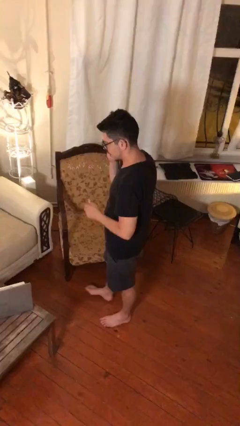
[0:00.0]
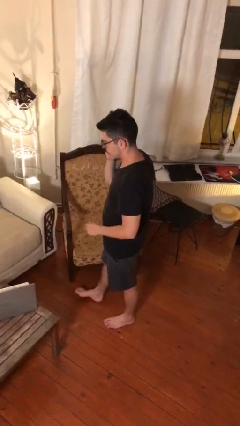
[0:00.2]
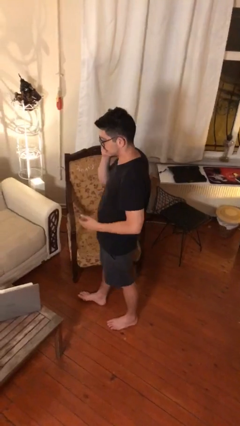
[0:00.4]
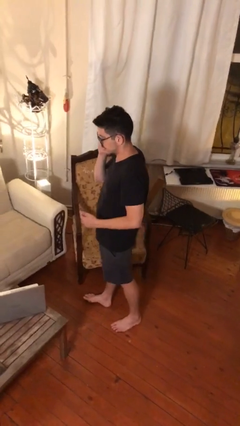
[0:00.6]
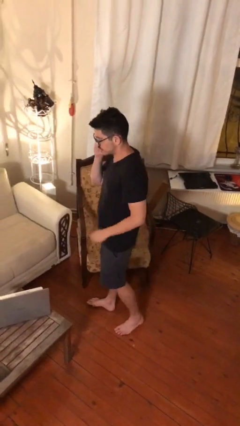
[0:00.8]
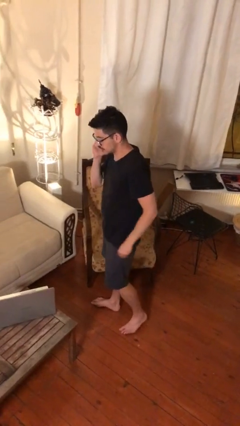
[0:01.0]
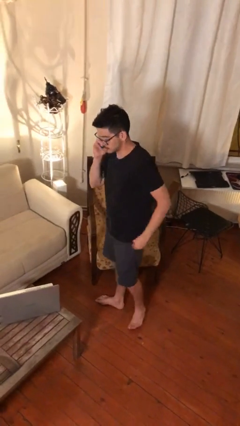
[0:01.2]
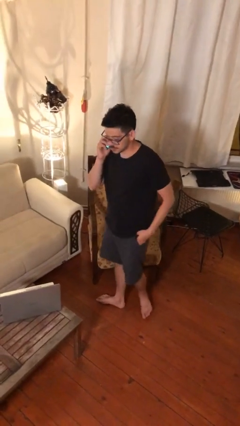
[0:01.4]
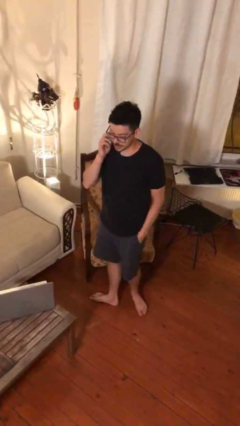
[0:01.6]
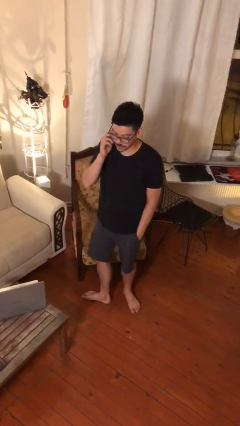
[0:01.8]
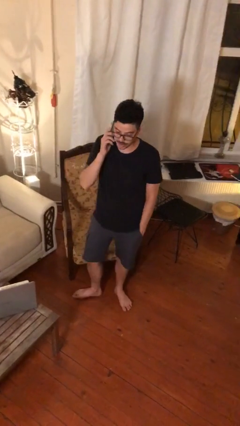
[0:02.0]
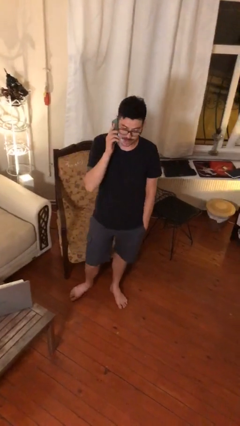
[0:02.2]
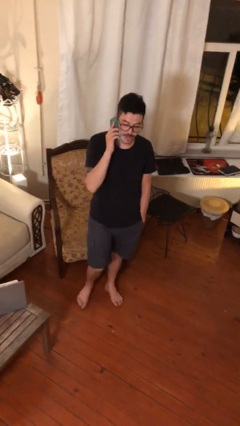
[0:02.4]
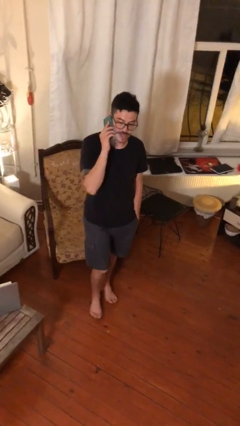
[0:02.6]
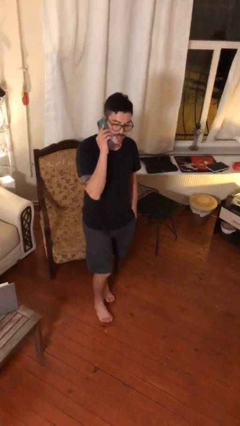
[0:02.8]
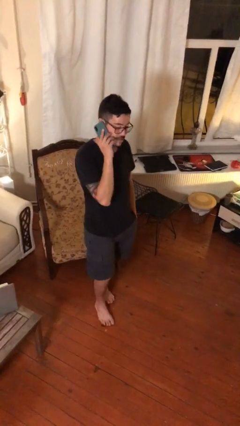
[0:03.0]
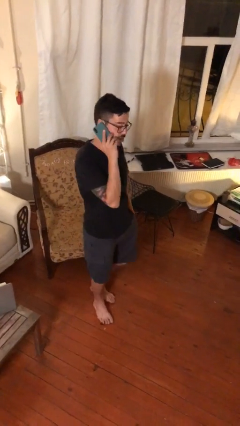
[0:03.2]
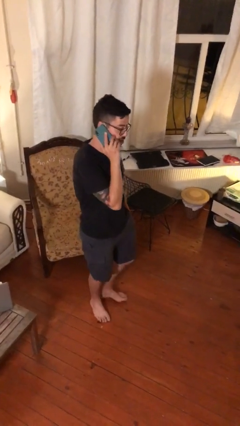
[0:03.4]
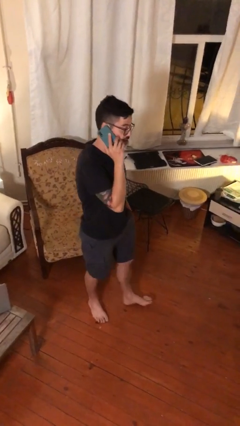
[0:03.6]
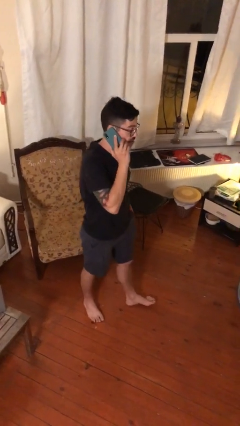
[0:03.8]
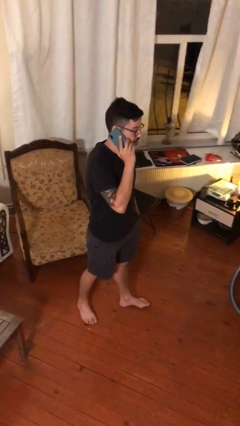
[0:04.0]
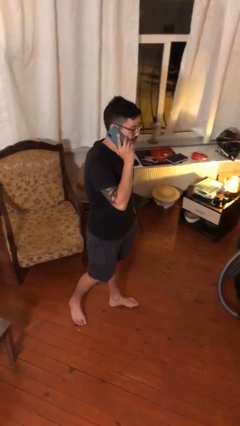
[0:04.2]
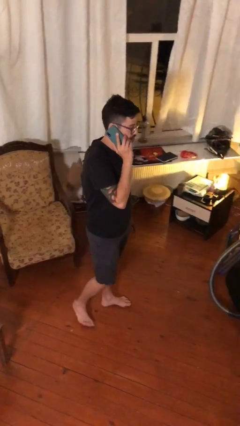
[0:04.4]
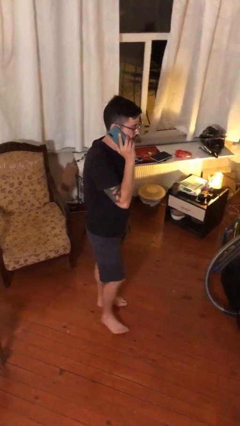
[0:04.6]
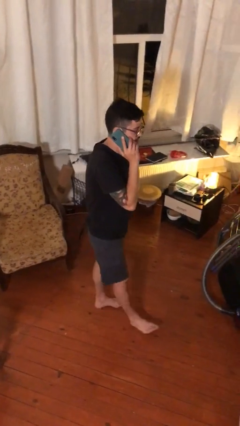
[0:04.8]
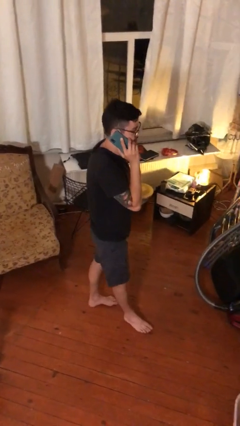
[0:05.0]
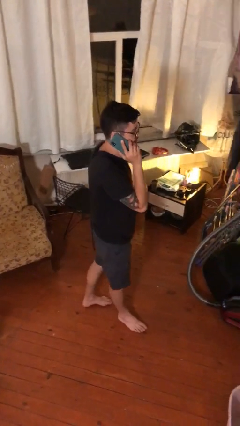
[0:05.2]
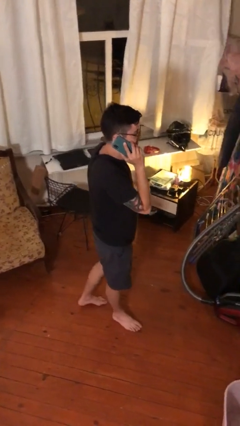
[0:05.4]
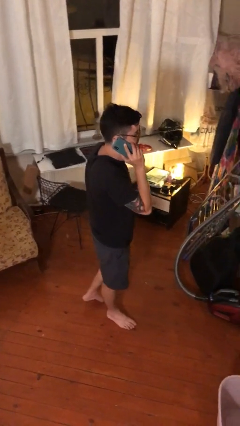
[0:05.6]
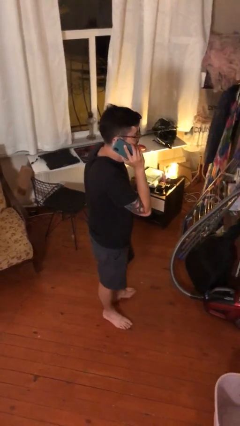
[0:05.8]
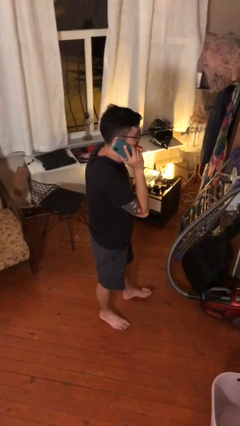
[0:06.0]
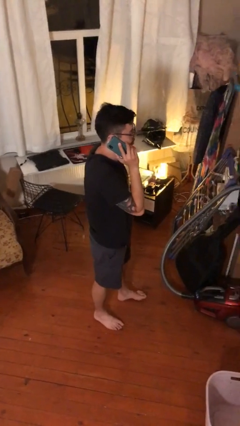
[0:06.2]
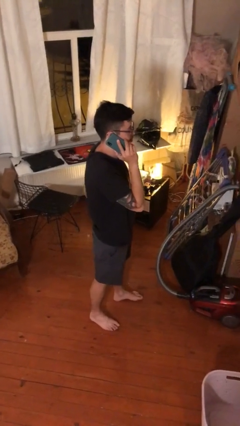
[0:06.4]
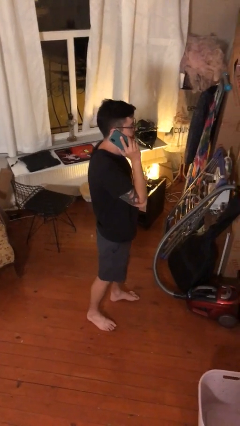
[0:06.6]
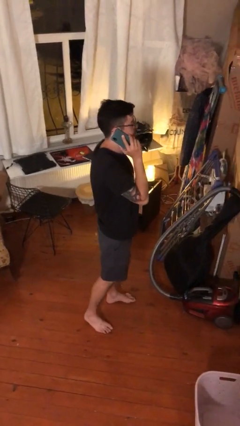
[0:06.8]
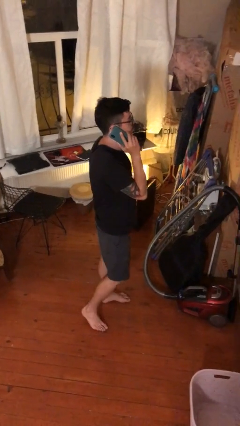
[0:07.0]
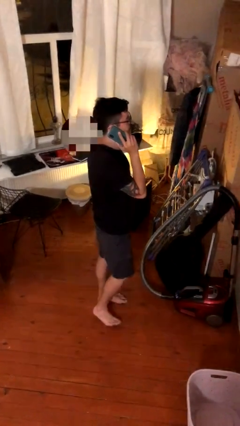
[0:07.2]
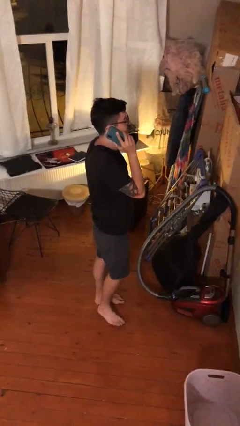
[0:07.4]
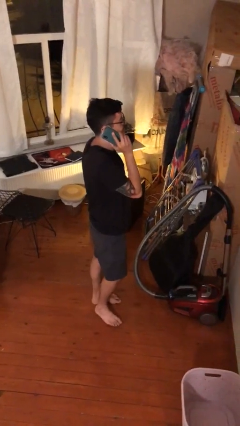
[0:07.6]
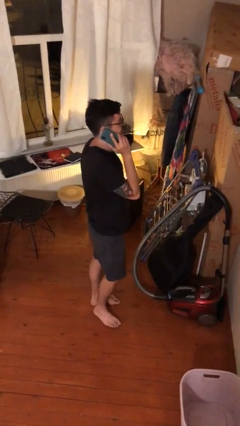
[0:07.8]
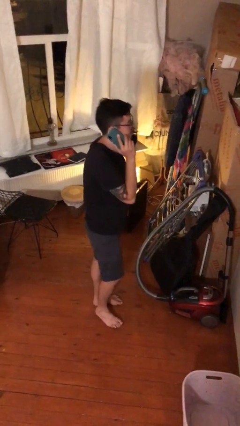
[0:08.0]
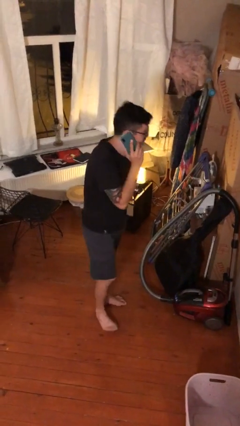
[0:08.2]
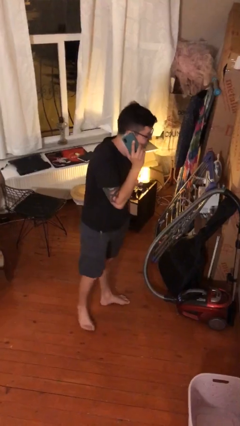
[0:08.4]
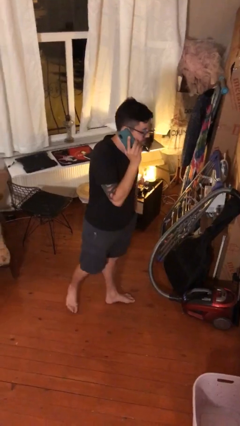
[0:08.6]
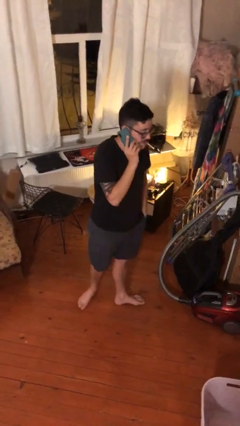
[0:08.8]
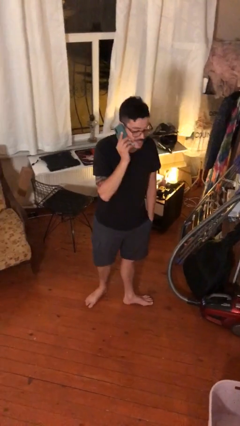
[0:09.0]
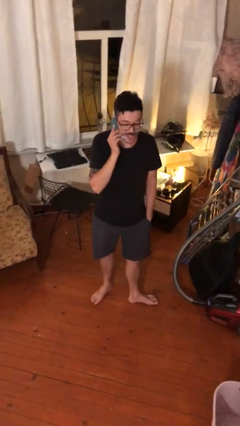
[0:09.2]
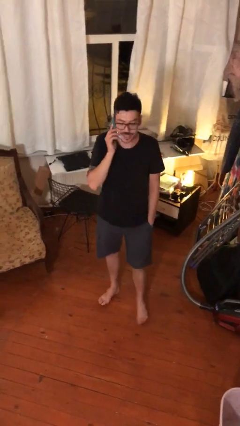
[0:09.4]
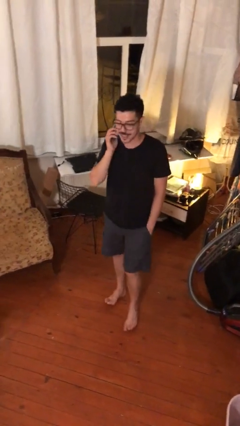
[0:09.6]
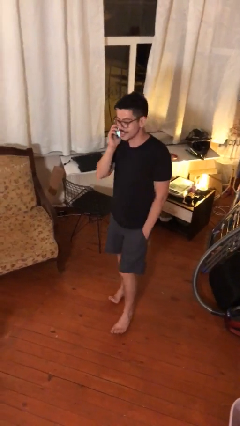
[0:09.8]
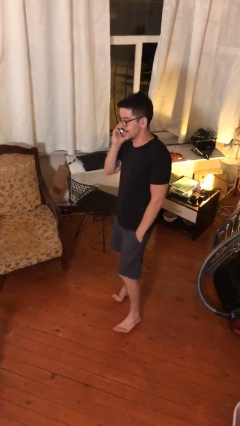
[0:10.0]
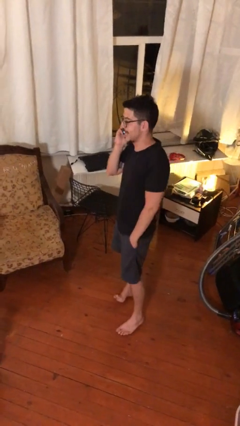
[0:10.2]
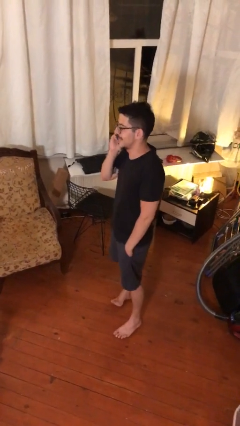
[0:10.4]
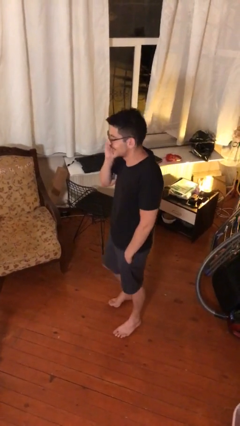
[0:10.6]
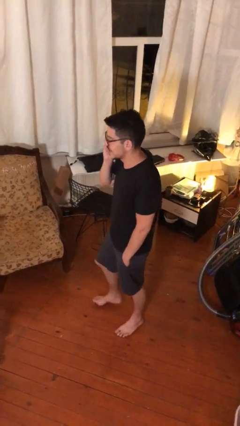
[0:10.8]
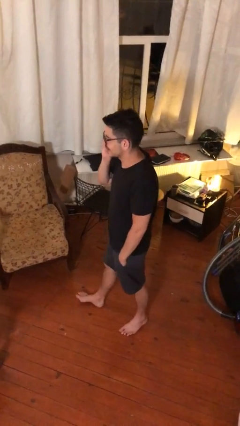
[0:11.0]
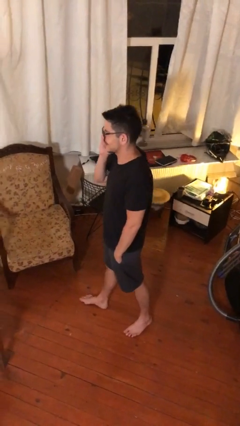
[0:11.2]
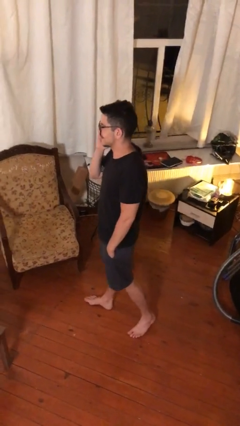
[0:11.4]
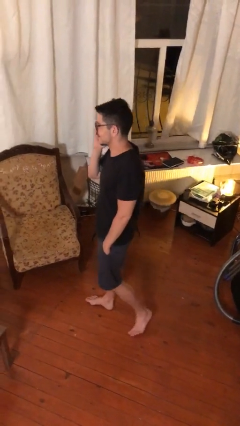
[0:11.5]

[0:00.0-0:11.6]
person talks on phone

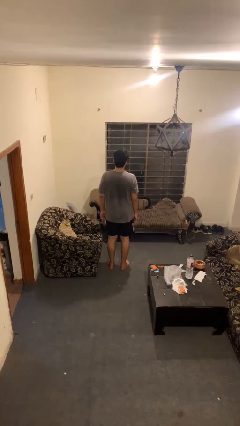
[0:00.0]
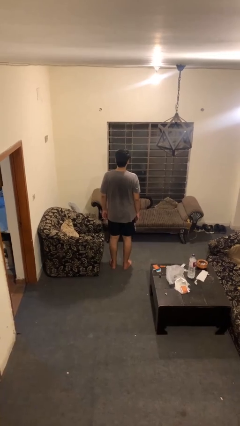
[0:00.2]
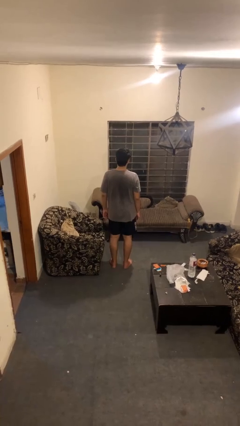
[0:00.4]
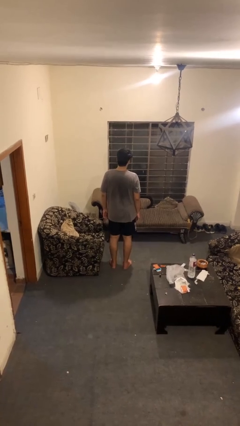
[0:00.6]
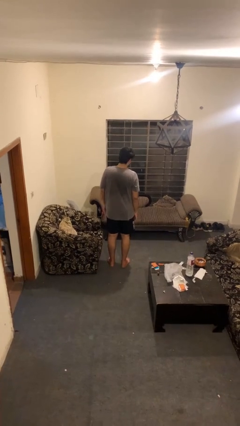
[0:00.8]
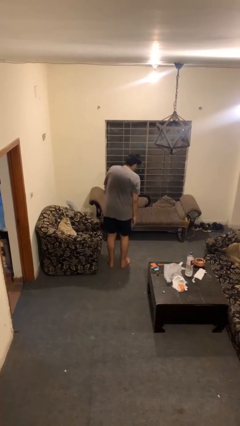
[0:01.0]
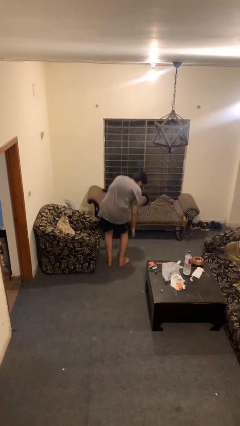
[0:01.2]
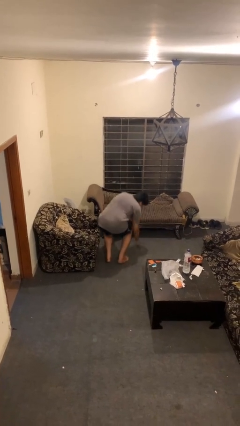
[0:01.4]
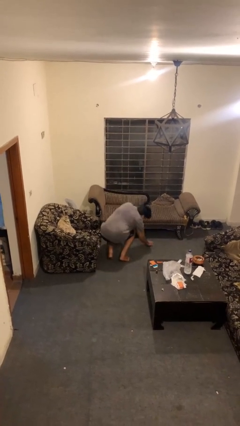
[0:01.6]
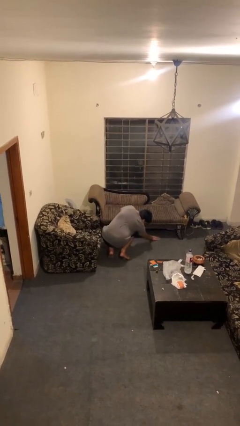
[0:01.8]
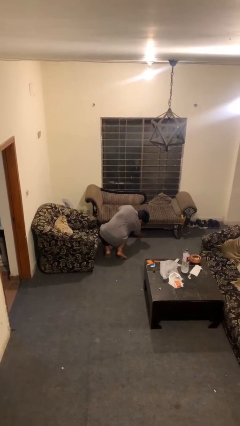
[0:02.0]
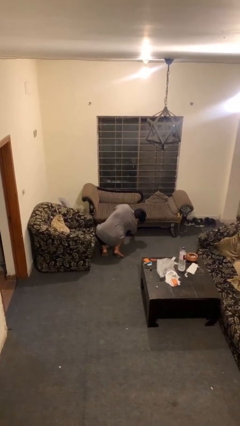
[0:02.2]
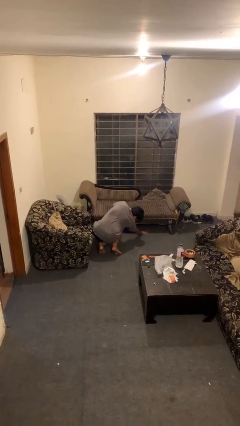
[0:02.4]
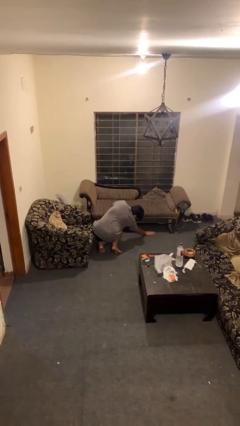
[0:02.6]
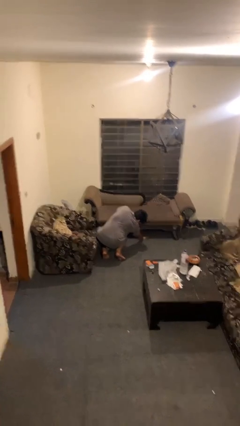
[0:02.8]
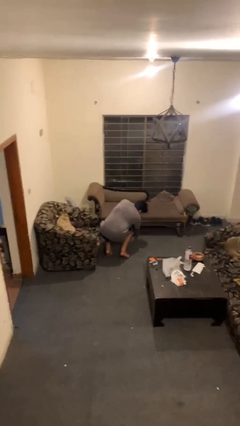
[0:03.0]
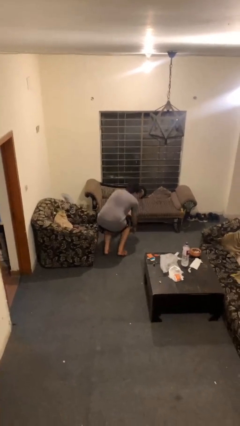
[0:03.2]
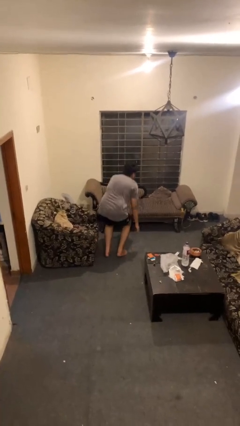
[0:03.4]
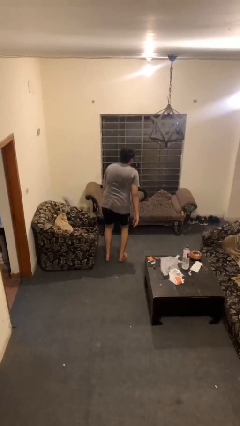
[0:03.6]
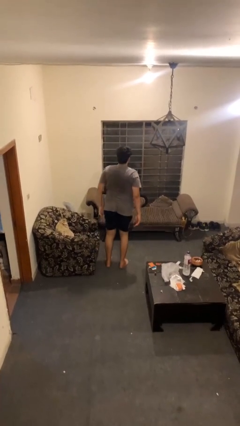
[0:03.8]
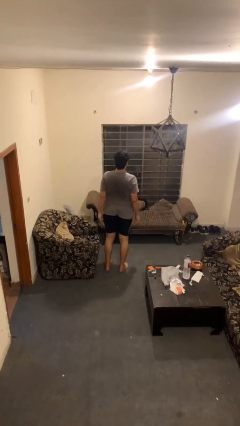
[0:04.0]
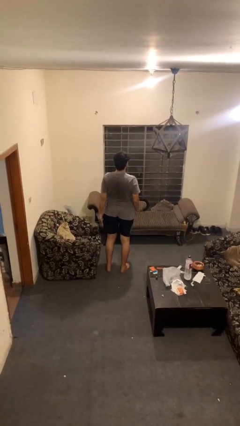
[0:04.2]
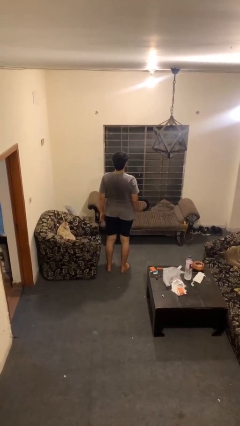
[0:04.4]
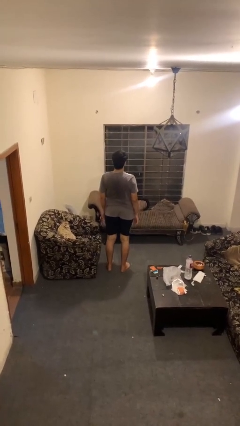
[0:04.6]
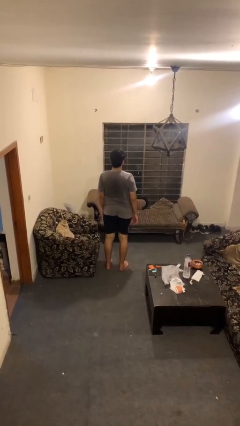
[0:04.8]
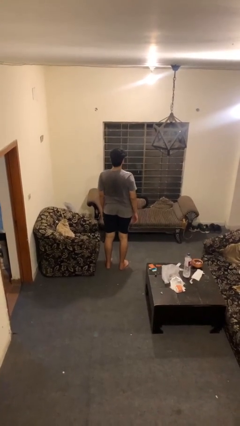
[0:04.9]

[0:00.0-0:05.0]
person searches under couch

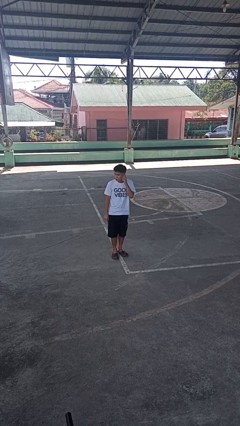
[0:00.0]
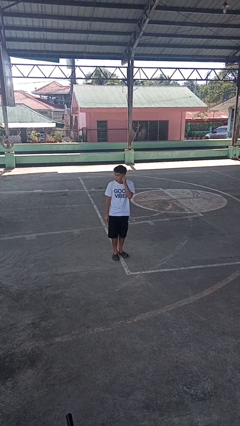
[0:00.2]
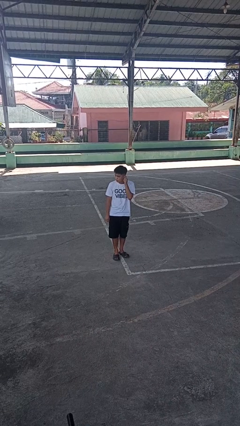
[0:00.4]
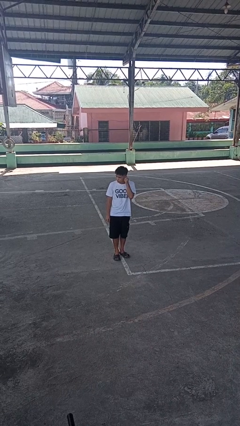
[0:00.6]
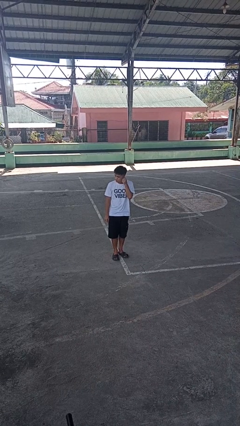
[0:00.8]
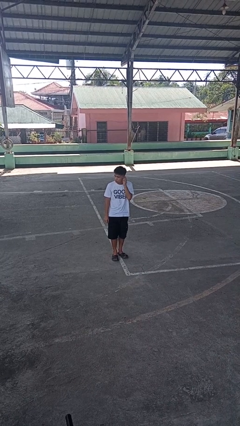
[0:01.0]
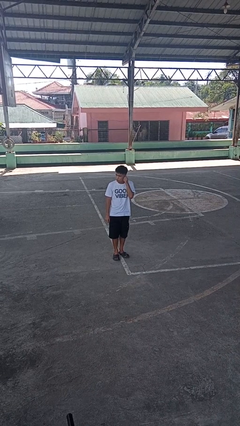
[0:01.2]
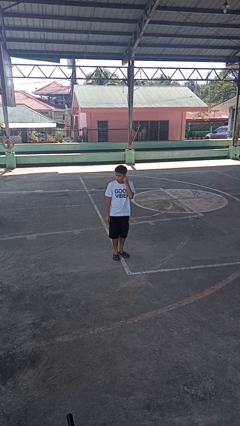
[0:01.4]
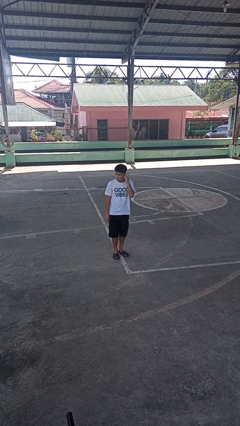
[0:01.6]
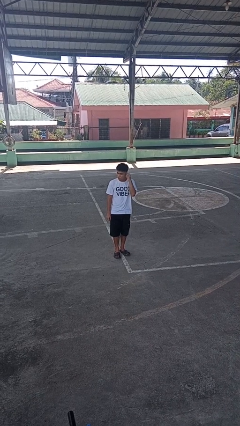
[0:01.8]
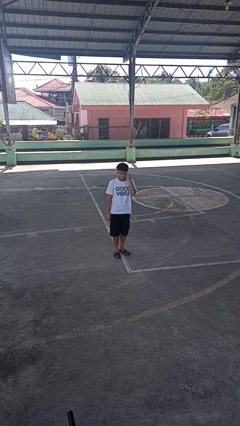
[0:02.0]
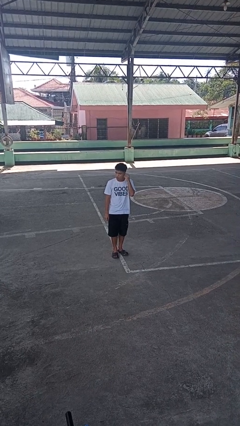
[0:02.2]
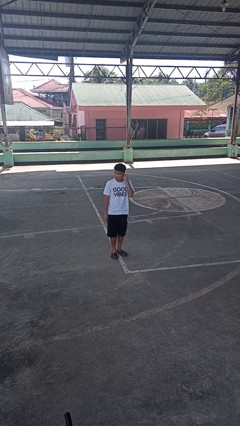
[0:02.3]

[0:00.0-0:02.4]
person touches earlobe
